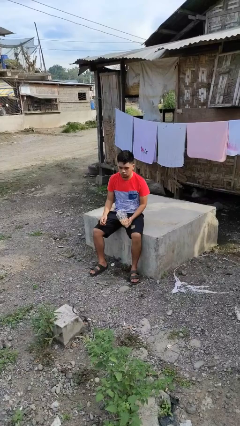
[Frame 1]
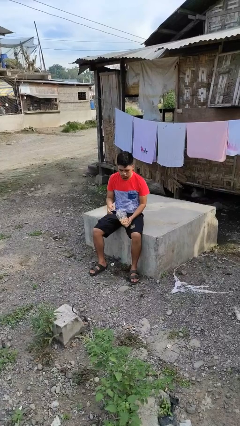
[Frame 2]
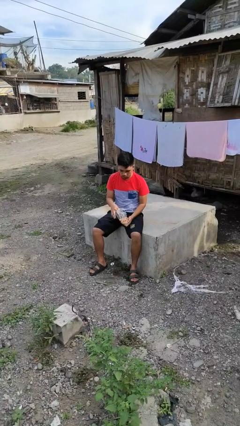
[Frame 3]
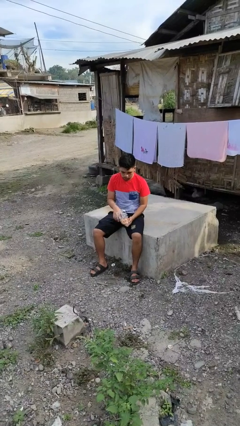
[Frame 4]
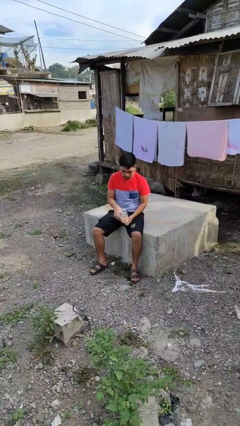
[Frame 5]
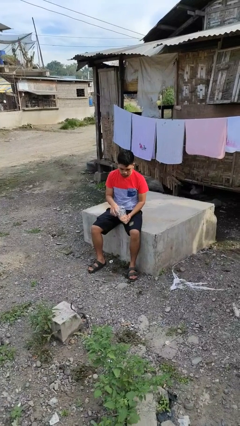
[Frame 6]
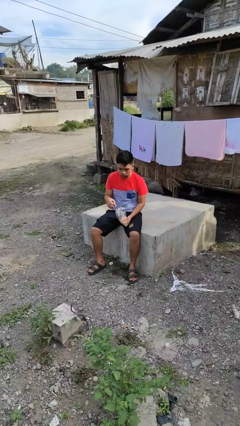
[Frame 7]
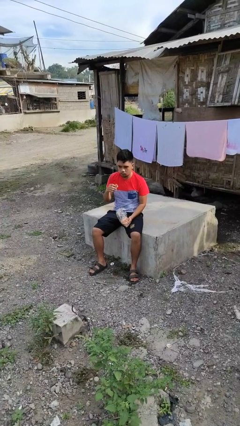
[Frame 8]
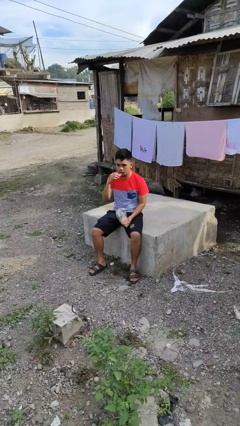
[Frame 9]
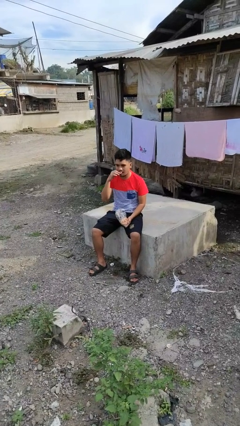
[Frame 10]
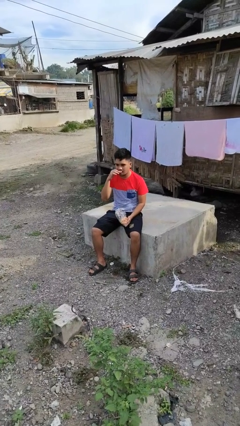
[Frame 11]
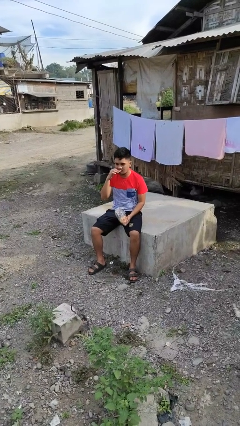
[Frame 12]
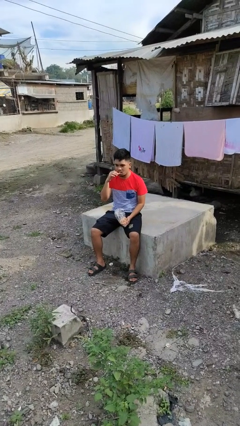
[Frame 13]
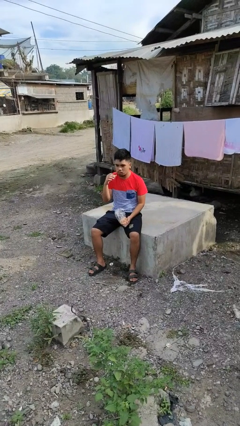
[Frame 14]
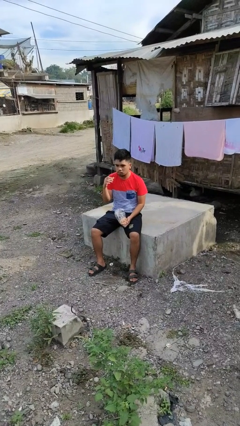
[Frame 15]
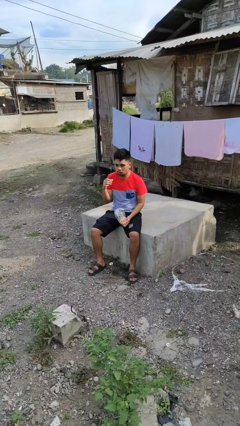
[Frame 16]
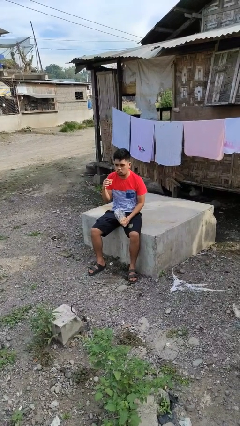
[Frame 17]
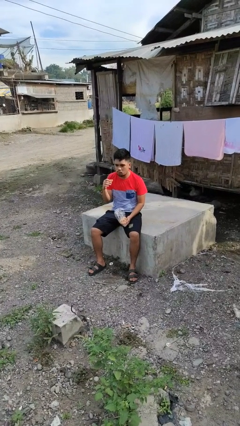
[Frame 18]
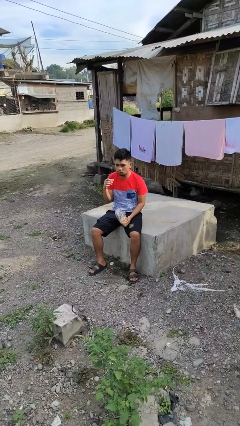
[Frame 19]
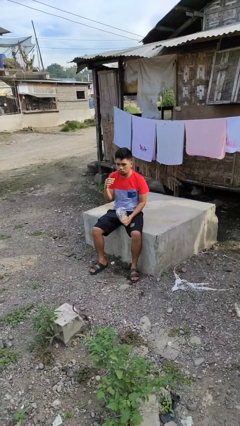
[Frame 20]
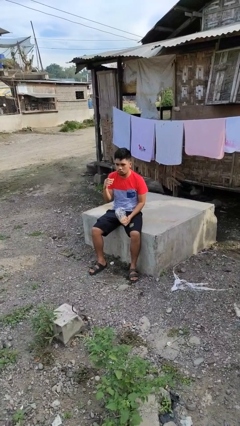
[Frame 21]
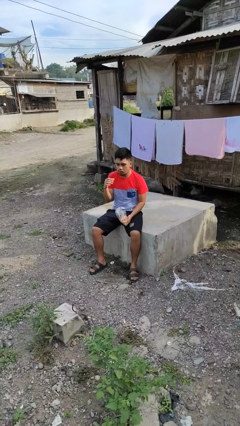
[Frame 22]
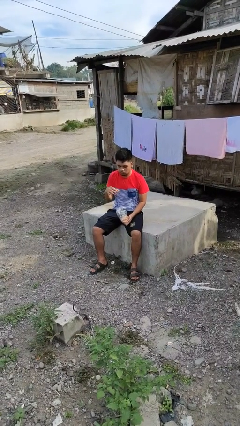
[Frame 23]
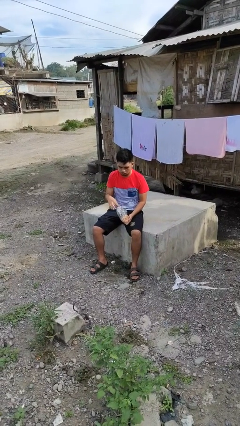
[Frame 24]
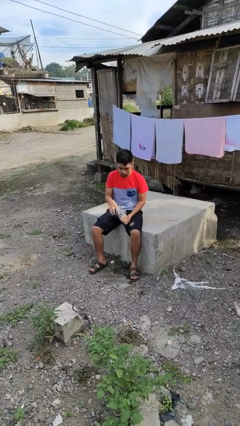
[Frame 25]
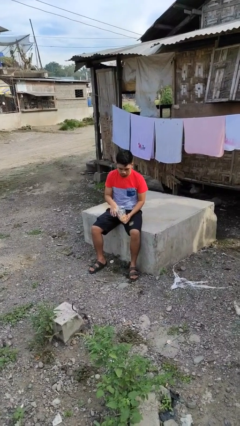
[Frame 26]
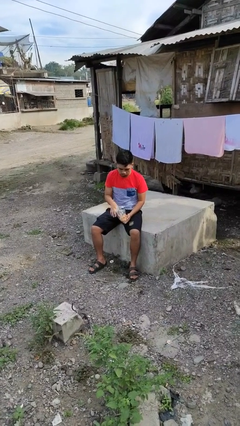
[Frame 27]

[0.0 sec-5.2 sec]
person eats snack from bag

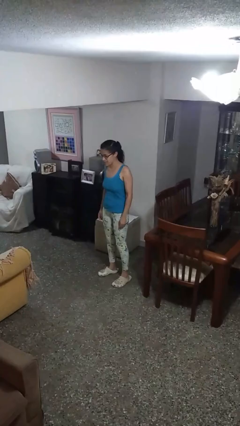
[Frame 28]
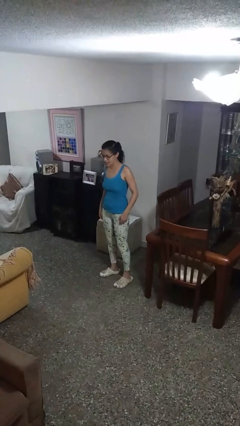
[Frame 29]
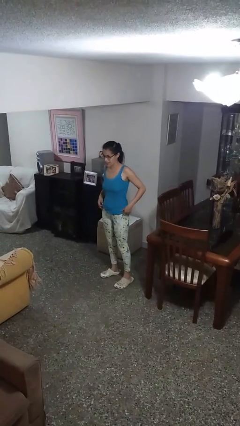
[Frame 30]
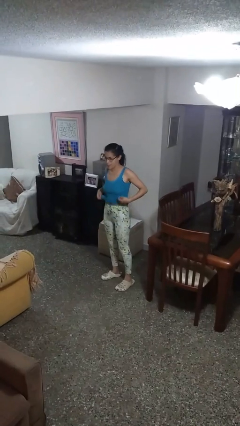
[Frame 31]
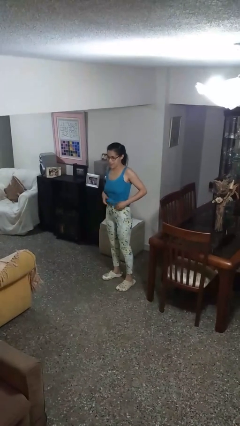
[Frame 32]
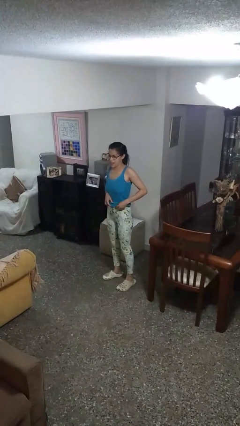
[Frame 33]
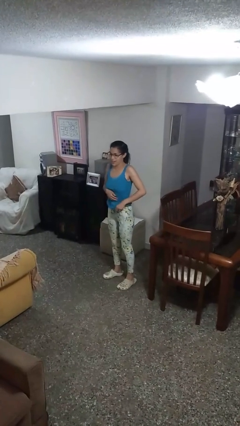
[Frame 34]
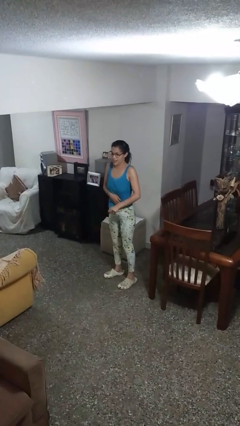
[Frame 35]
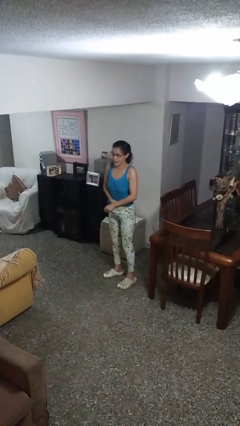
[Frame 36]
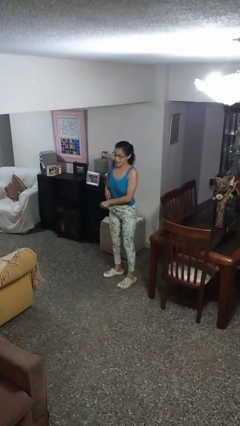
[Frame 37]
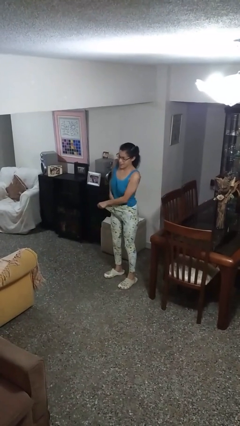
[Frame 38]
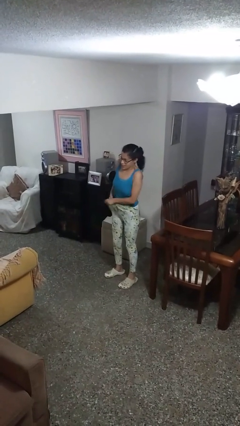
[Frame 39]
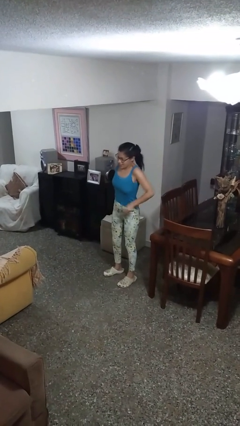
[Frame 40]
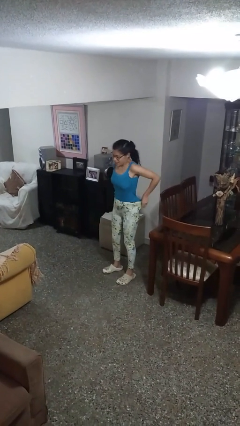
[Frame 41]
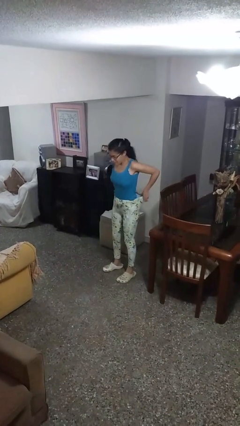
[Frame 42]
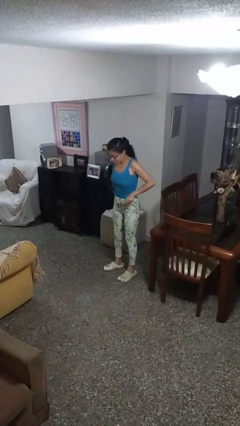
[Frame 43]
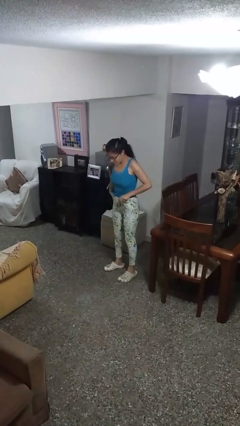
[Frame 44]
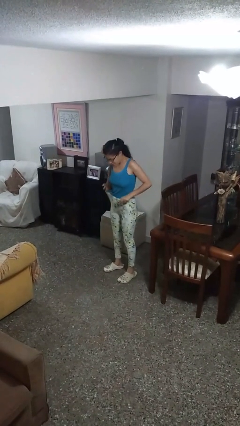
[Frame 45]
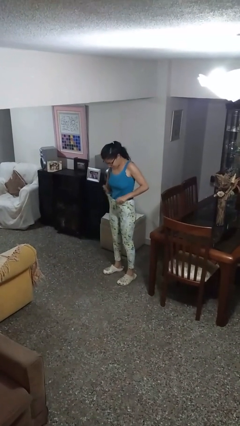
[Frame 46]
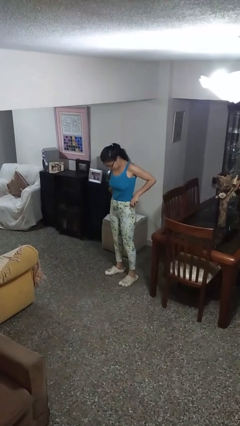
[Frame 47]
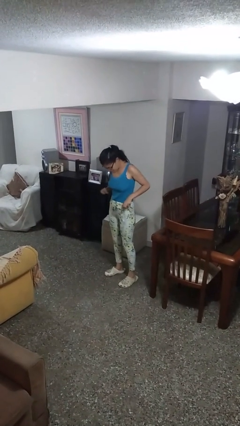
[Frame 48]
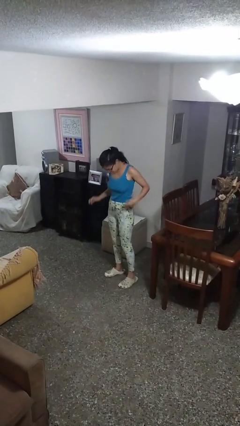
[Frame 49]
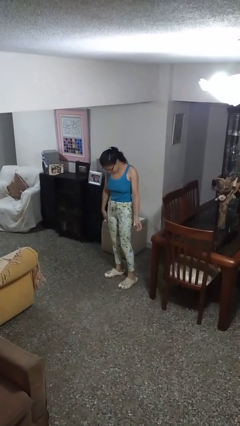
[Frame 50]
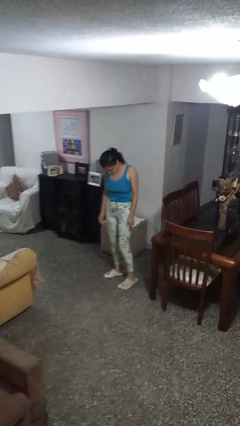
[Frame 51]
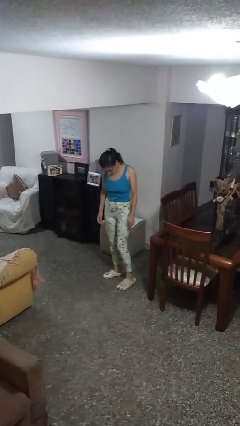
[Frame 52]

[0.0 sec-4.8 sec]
person tucks in shirt

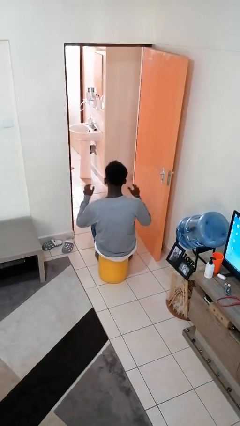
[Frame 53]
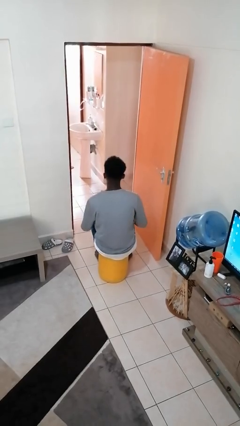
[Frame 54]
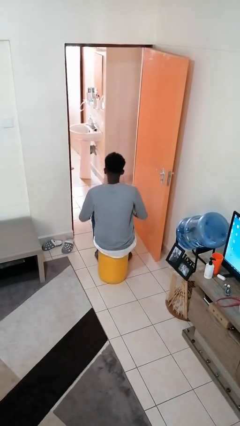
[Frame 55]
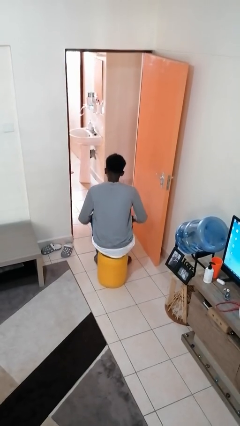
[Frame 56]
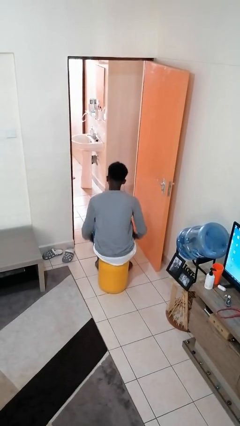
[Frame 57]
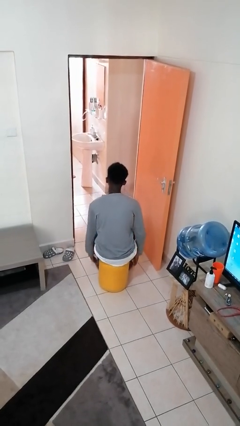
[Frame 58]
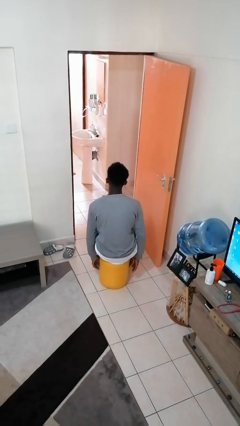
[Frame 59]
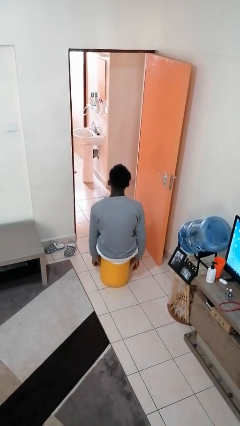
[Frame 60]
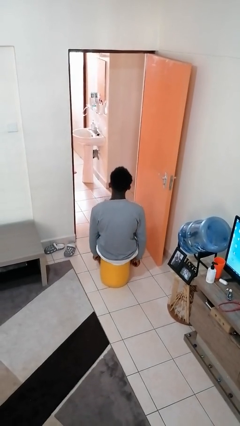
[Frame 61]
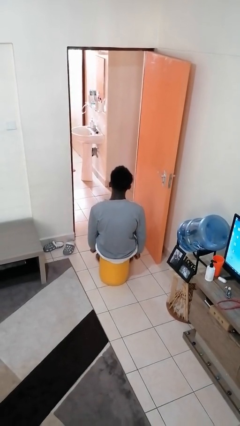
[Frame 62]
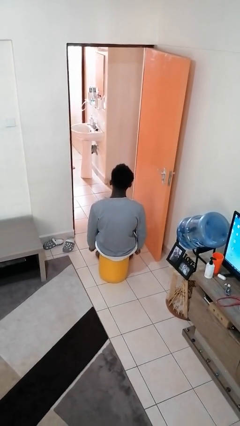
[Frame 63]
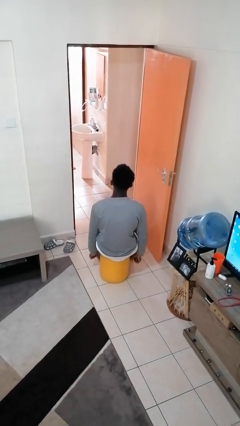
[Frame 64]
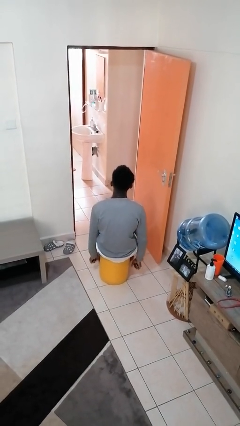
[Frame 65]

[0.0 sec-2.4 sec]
person slaps hands on thighs

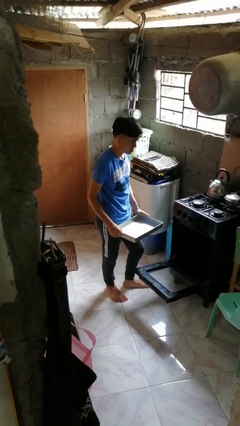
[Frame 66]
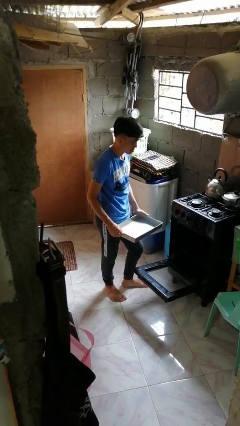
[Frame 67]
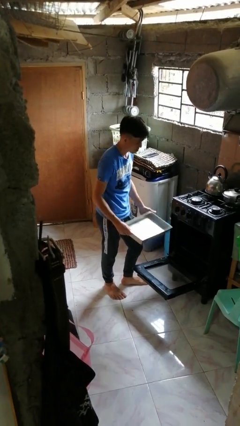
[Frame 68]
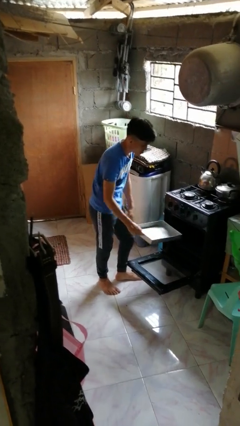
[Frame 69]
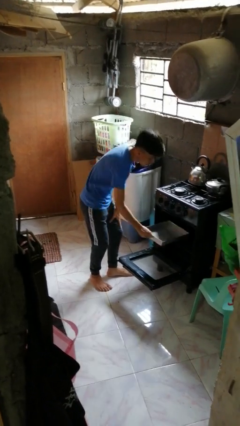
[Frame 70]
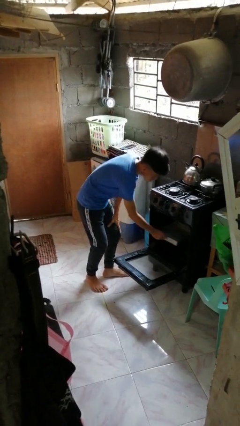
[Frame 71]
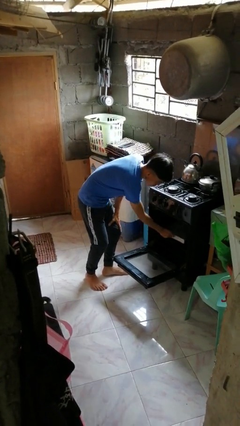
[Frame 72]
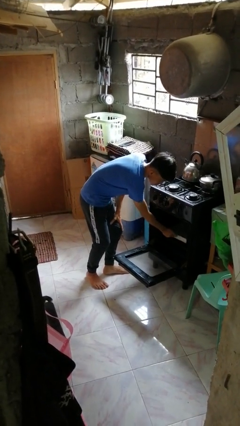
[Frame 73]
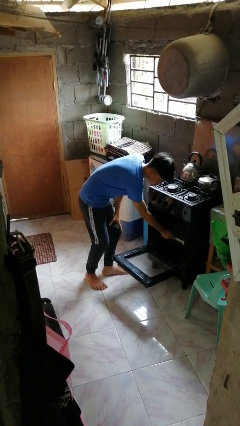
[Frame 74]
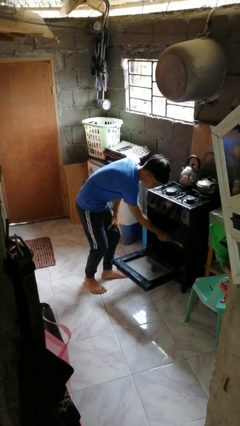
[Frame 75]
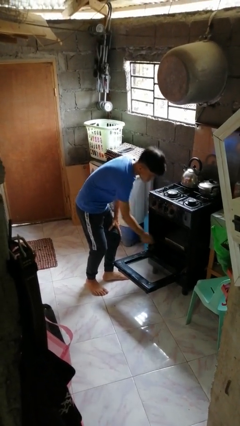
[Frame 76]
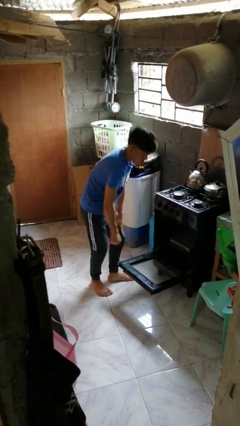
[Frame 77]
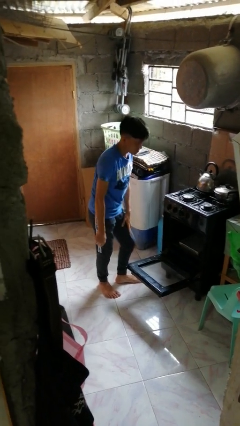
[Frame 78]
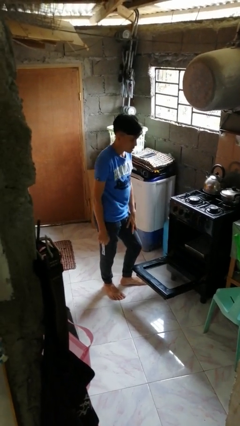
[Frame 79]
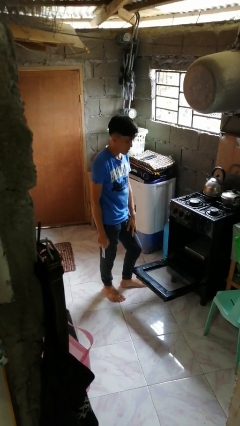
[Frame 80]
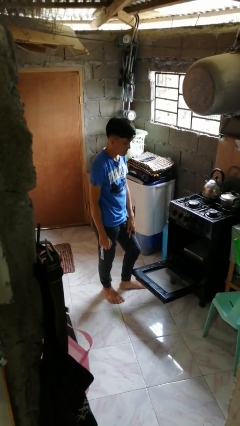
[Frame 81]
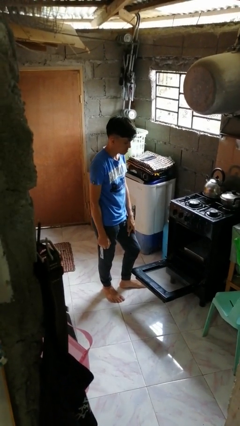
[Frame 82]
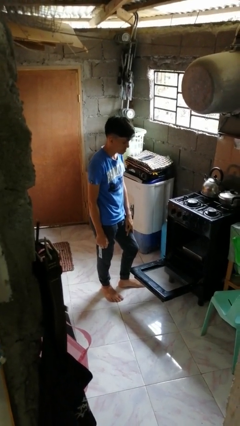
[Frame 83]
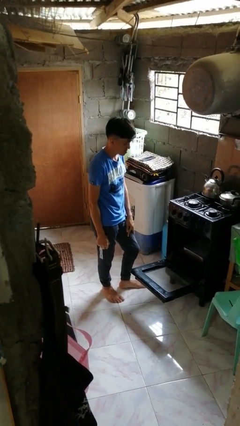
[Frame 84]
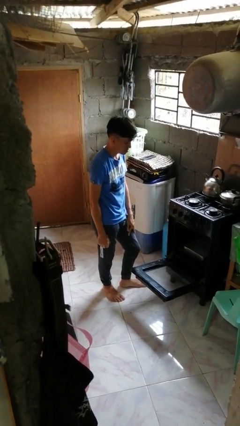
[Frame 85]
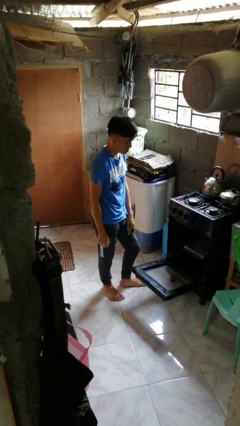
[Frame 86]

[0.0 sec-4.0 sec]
person puts object into oven

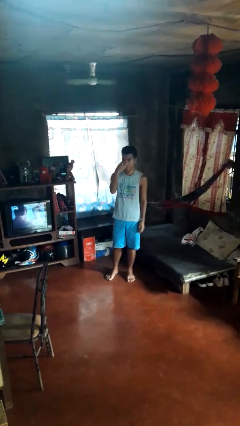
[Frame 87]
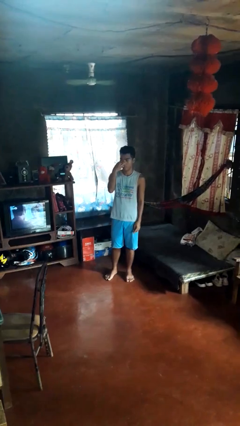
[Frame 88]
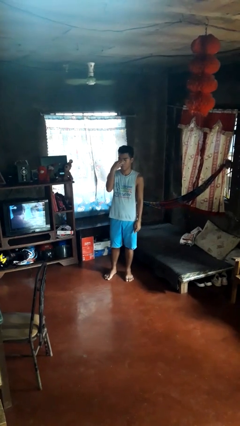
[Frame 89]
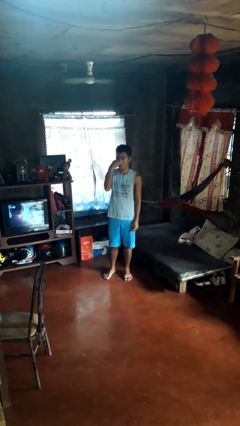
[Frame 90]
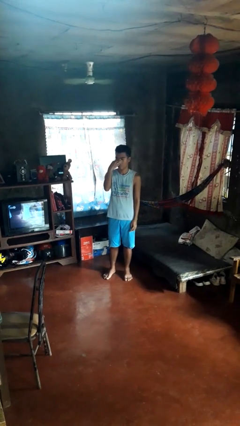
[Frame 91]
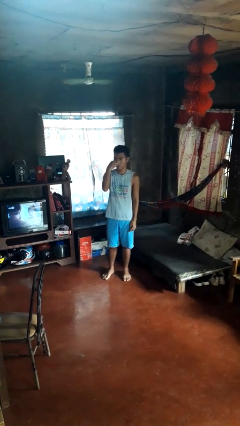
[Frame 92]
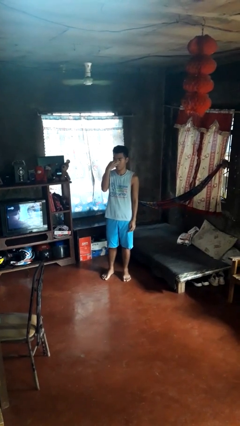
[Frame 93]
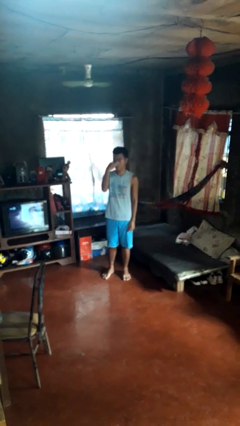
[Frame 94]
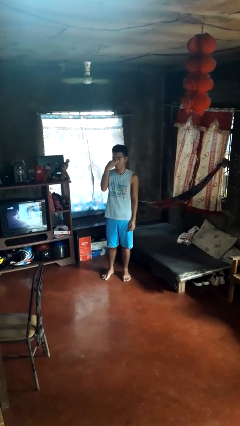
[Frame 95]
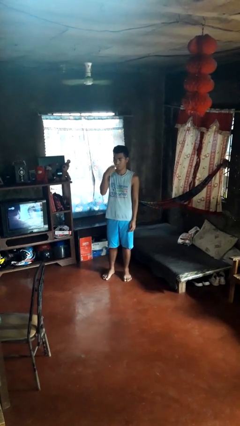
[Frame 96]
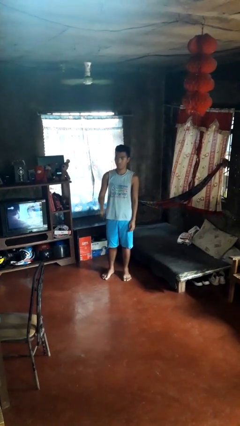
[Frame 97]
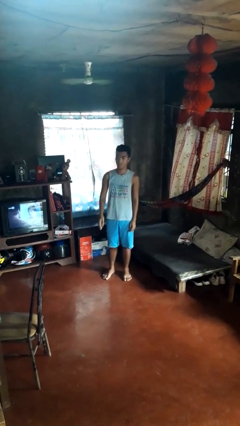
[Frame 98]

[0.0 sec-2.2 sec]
person gestures watch closely
